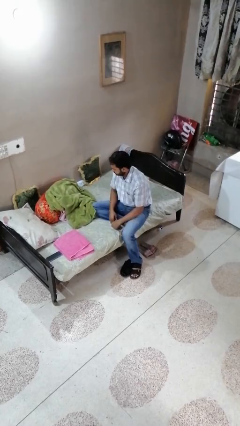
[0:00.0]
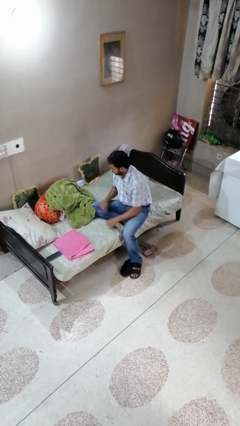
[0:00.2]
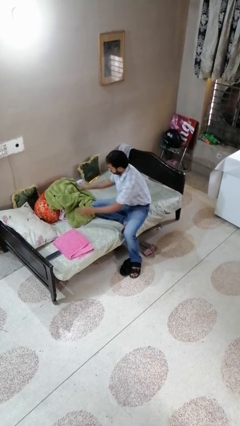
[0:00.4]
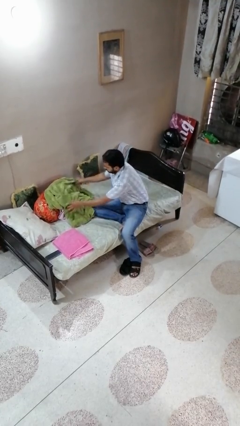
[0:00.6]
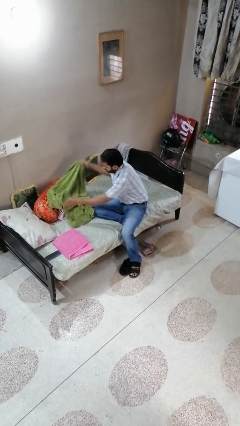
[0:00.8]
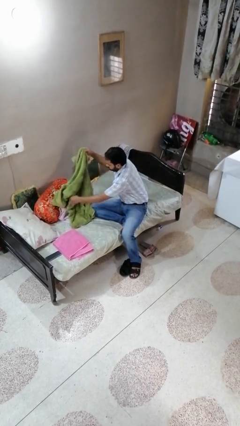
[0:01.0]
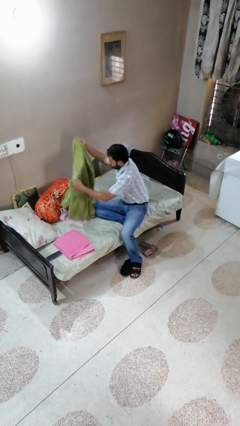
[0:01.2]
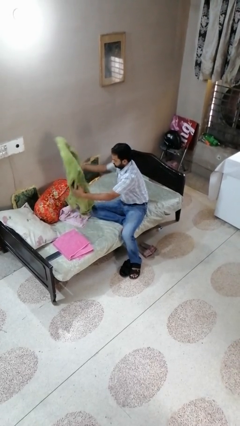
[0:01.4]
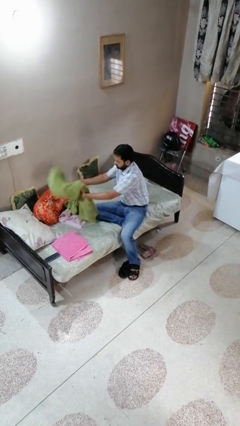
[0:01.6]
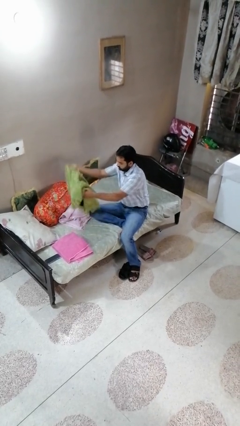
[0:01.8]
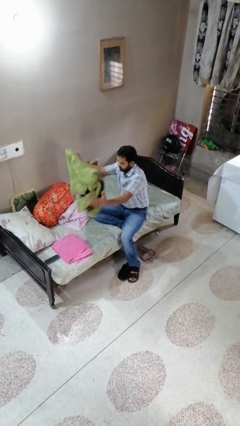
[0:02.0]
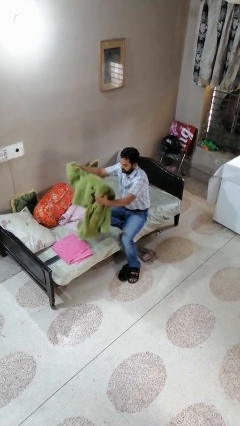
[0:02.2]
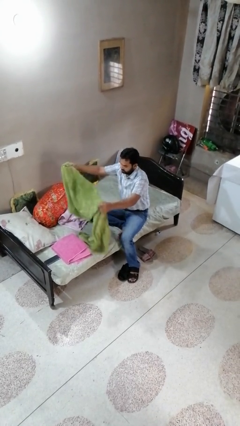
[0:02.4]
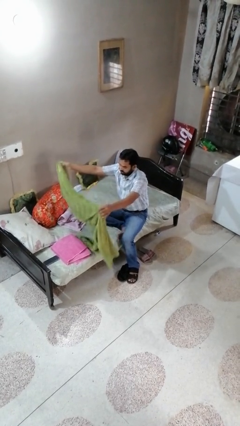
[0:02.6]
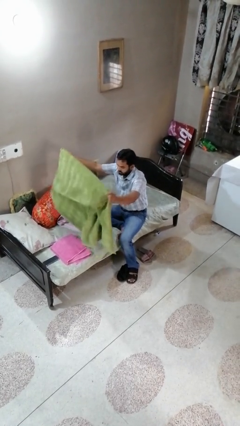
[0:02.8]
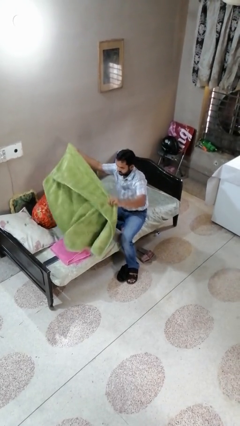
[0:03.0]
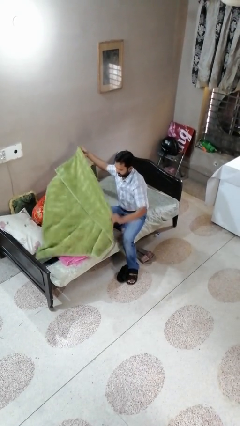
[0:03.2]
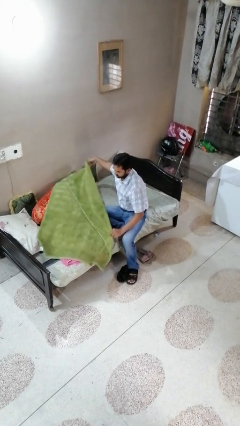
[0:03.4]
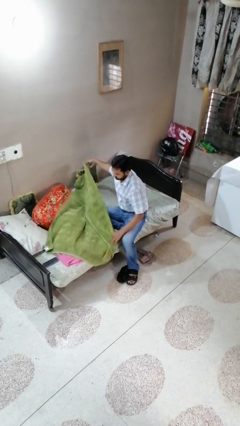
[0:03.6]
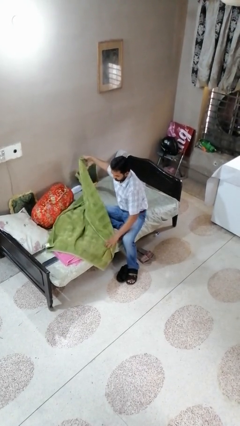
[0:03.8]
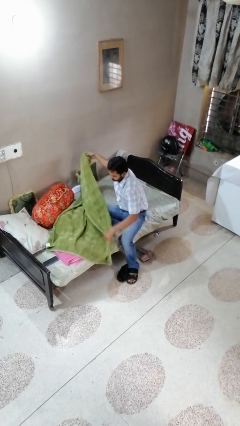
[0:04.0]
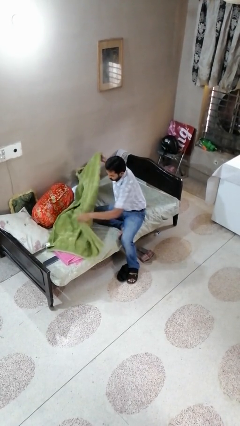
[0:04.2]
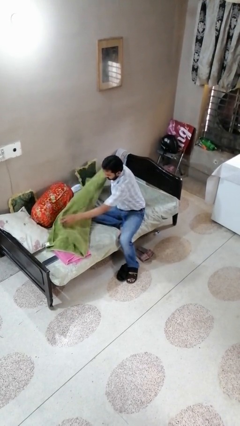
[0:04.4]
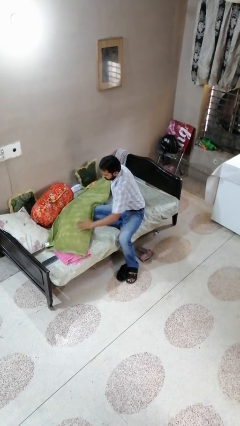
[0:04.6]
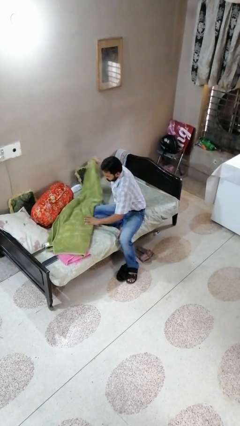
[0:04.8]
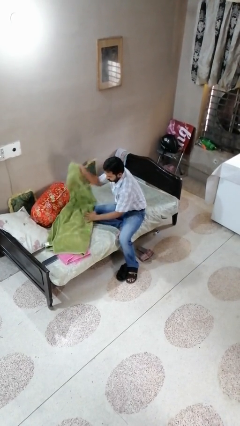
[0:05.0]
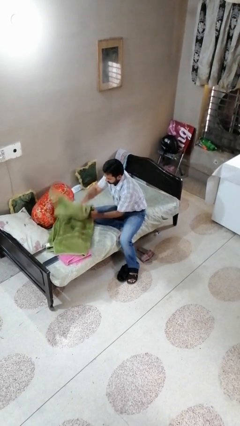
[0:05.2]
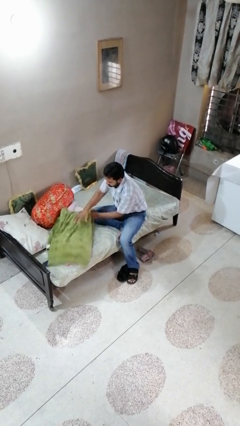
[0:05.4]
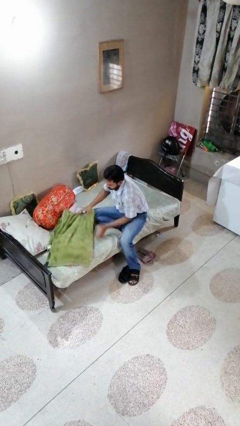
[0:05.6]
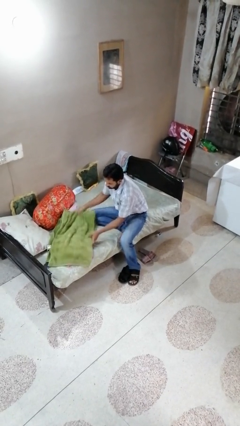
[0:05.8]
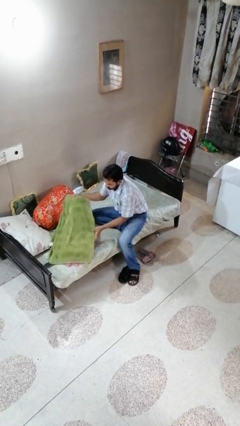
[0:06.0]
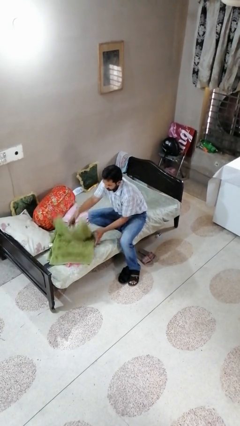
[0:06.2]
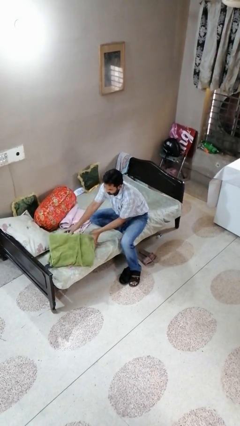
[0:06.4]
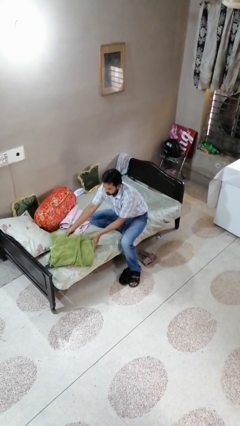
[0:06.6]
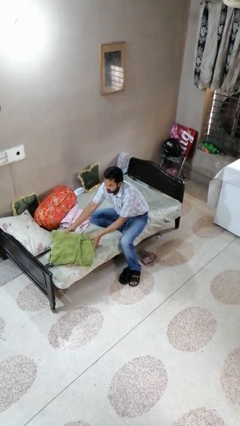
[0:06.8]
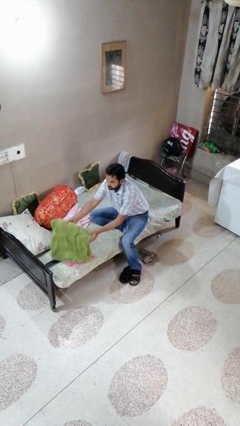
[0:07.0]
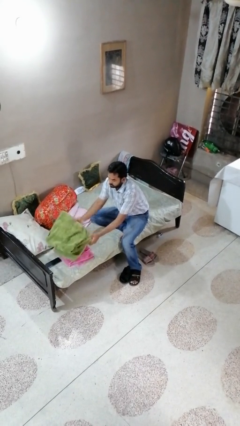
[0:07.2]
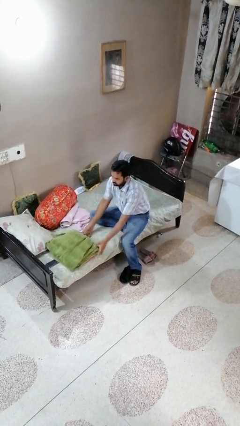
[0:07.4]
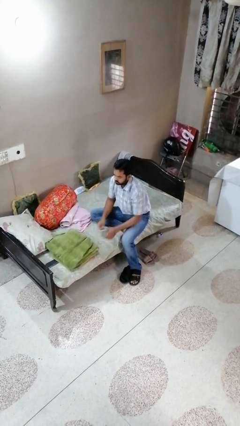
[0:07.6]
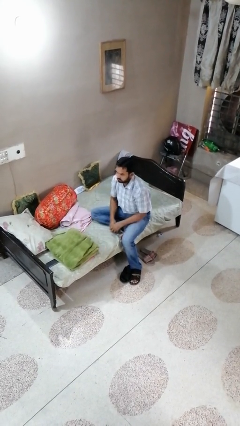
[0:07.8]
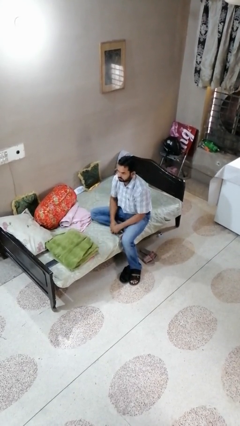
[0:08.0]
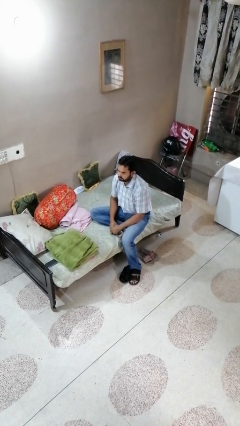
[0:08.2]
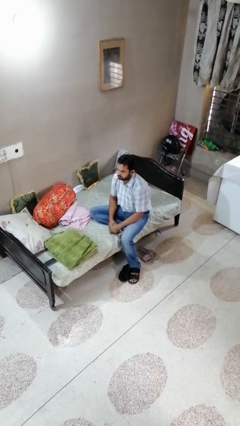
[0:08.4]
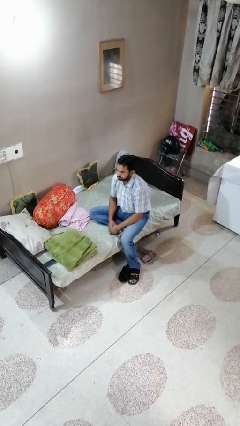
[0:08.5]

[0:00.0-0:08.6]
person folds towel

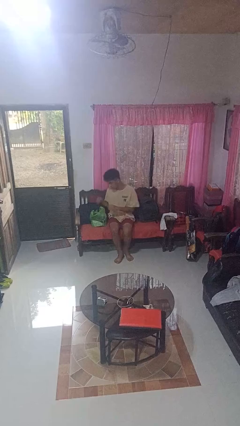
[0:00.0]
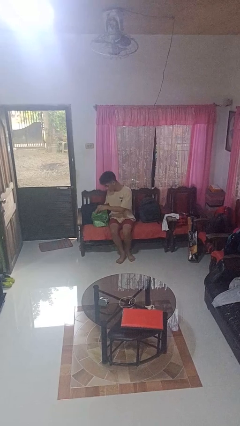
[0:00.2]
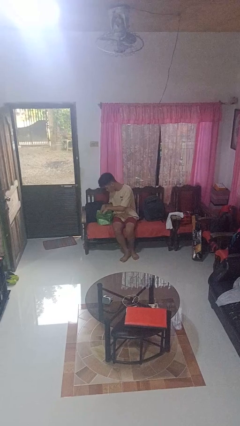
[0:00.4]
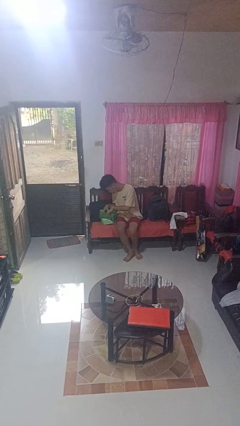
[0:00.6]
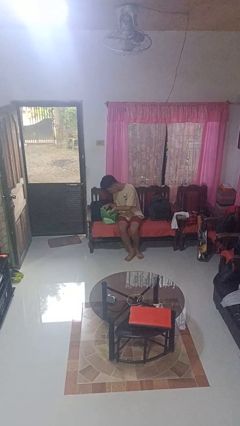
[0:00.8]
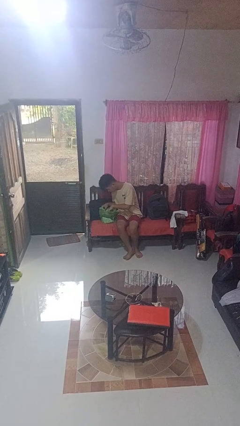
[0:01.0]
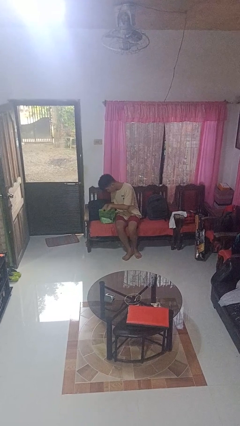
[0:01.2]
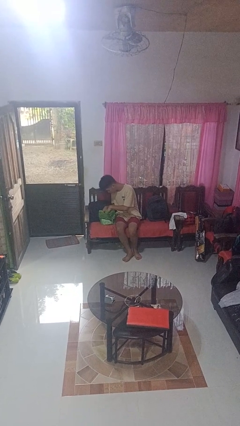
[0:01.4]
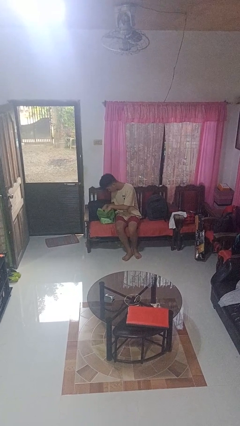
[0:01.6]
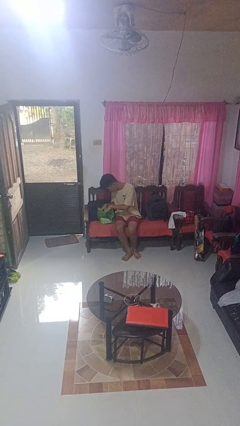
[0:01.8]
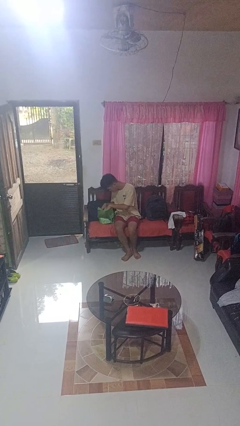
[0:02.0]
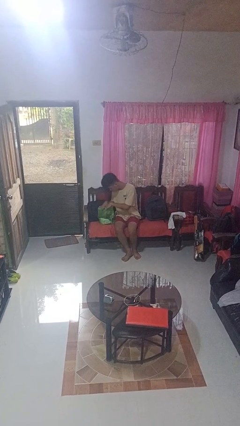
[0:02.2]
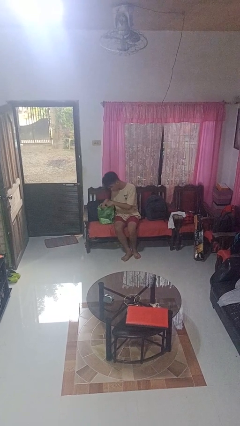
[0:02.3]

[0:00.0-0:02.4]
person searches in bag

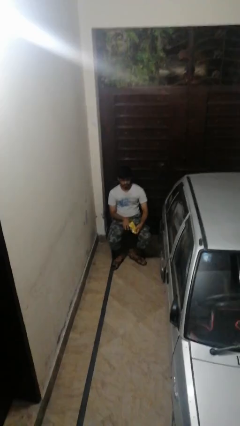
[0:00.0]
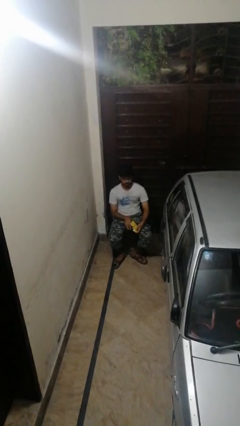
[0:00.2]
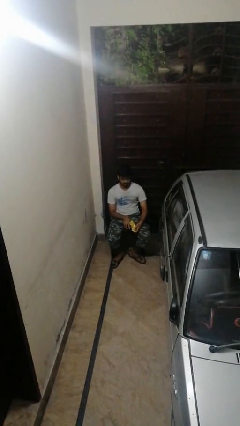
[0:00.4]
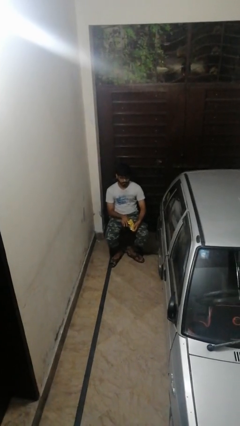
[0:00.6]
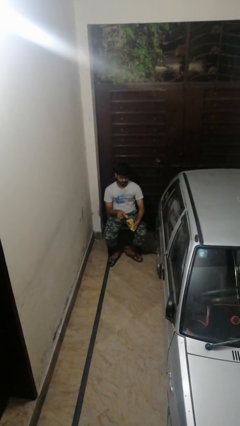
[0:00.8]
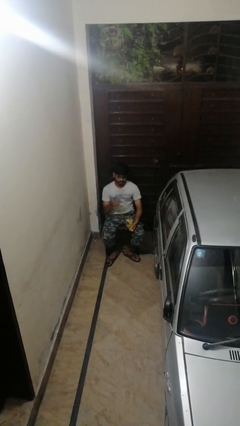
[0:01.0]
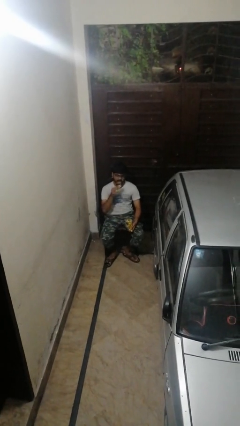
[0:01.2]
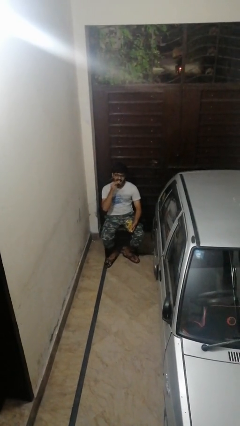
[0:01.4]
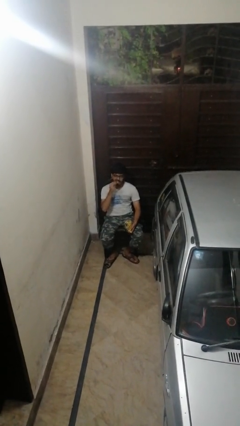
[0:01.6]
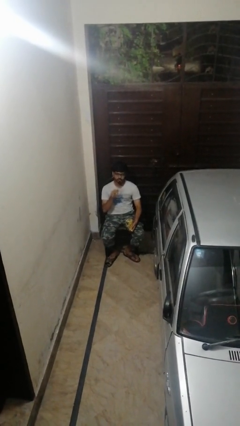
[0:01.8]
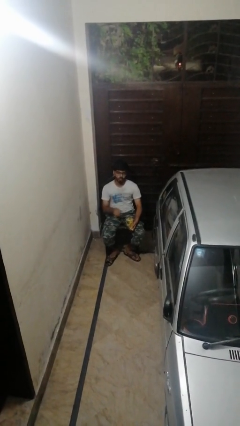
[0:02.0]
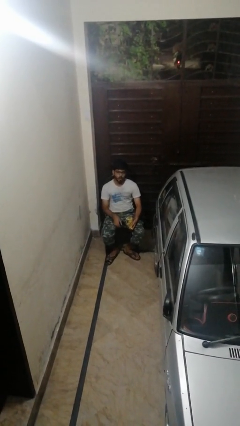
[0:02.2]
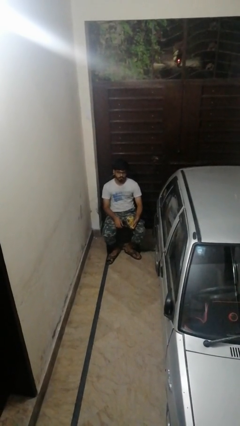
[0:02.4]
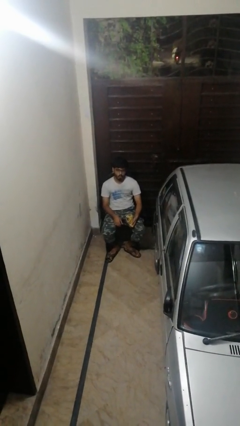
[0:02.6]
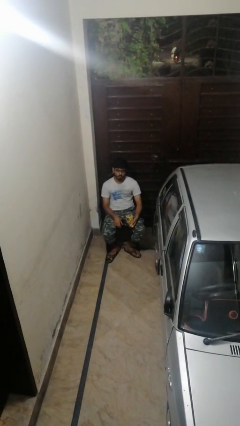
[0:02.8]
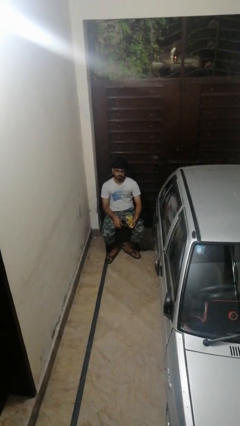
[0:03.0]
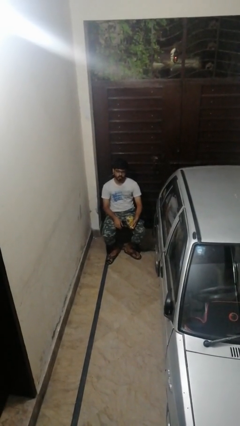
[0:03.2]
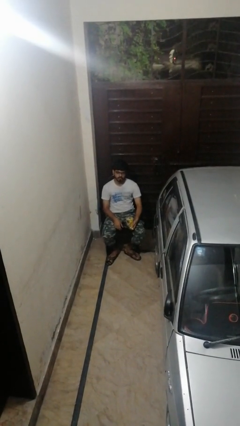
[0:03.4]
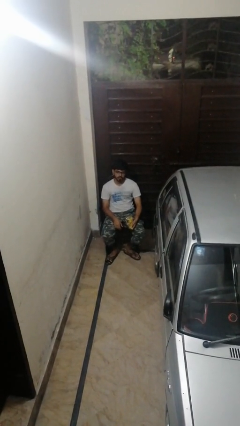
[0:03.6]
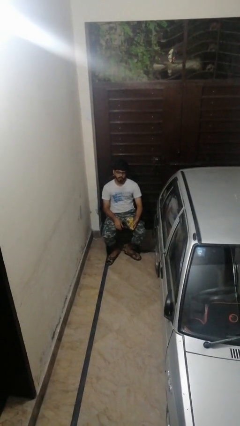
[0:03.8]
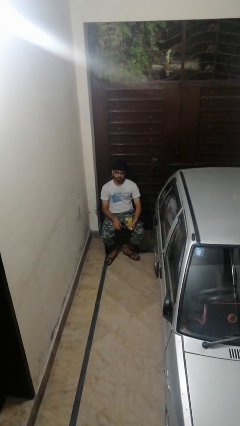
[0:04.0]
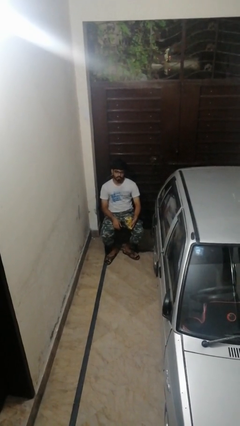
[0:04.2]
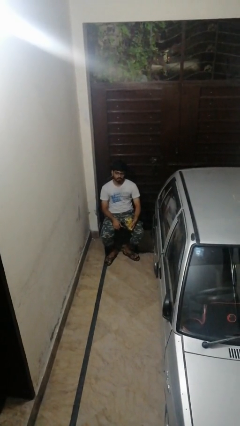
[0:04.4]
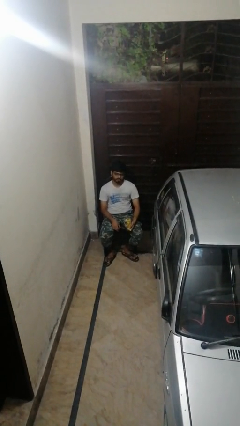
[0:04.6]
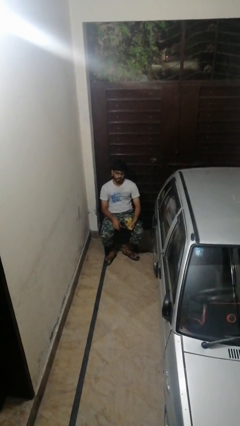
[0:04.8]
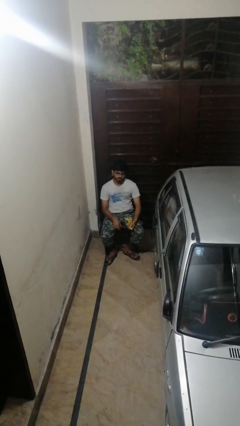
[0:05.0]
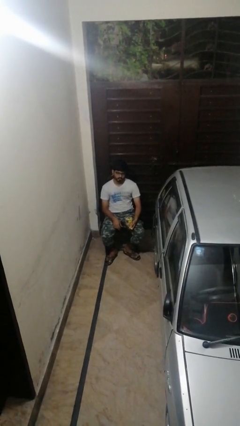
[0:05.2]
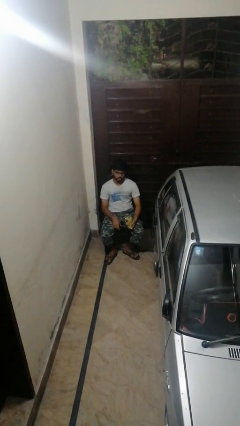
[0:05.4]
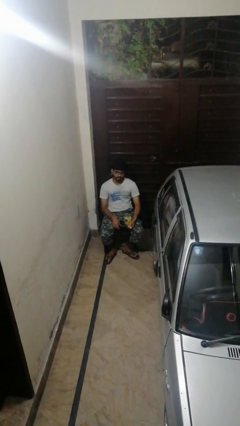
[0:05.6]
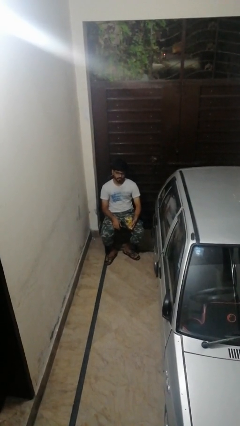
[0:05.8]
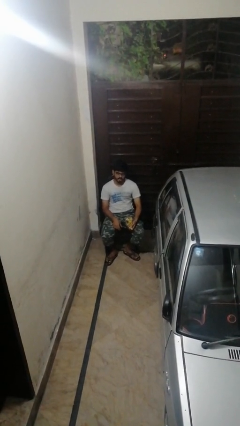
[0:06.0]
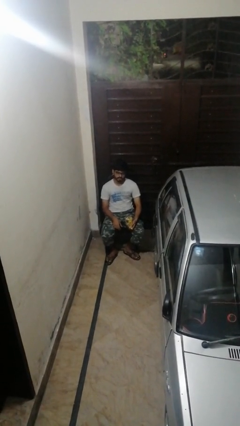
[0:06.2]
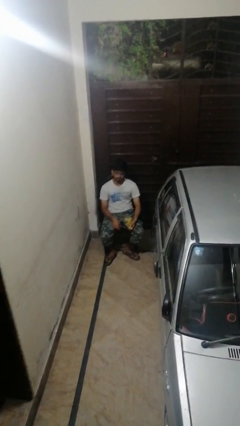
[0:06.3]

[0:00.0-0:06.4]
person eats snack from bag

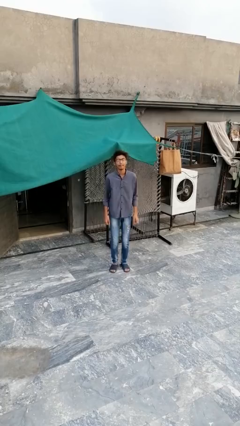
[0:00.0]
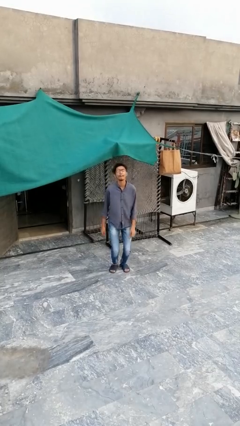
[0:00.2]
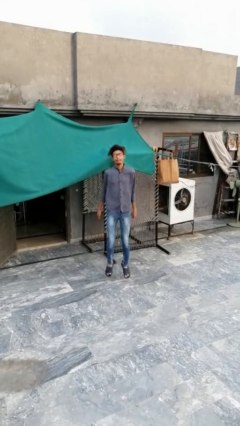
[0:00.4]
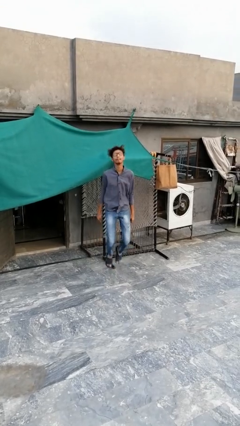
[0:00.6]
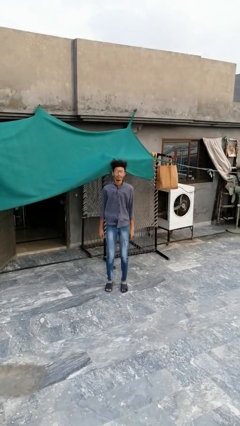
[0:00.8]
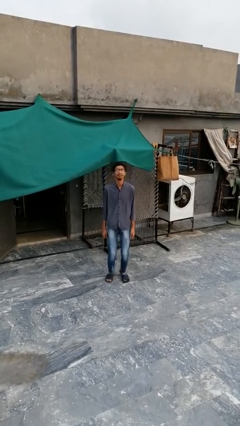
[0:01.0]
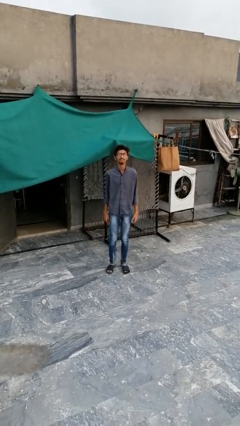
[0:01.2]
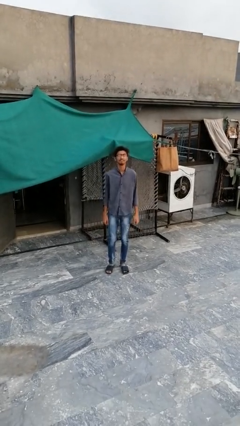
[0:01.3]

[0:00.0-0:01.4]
person jumps
